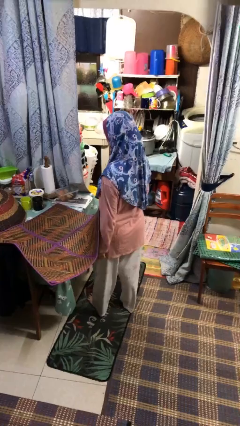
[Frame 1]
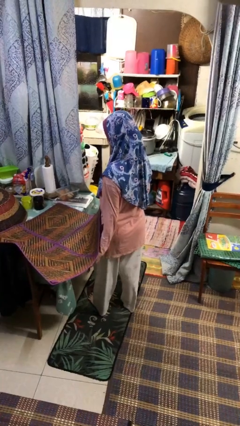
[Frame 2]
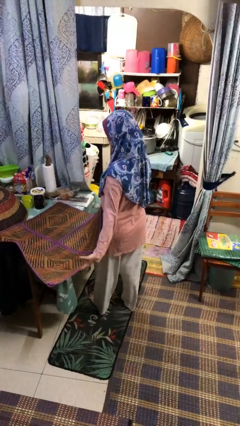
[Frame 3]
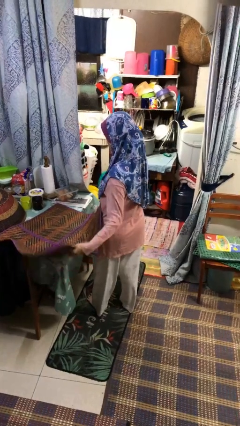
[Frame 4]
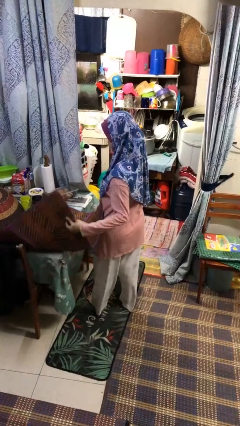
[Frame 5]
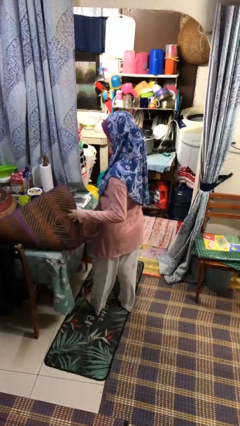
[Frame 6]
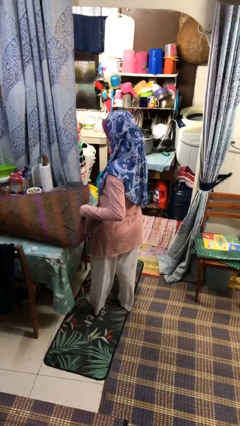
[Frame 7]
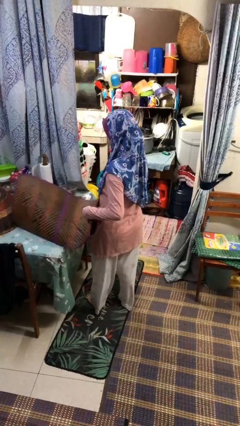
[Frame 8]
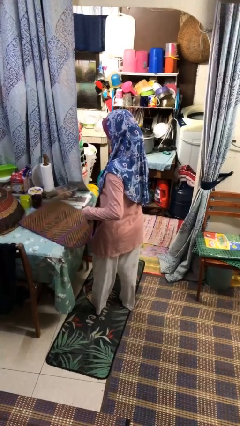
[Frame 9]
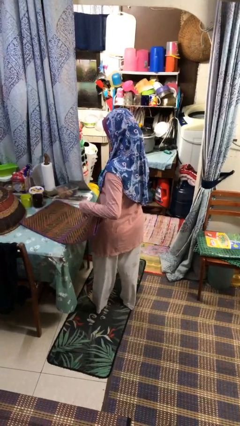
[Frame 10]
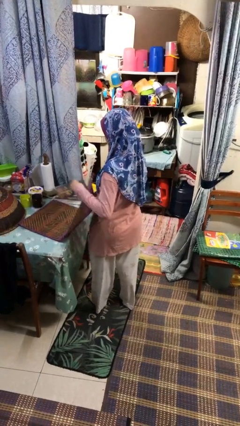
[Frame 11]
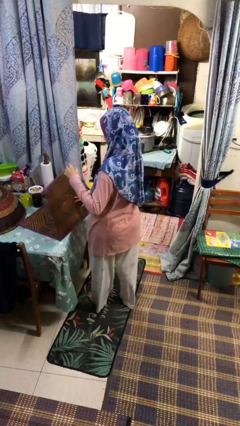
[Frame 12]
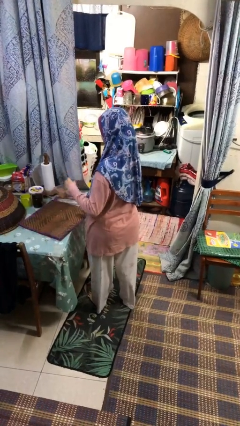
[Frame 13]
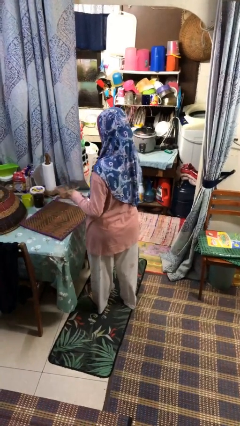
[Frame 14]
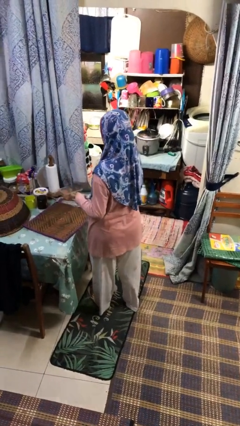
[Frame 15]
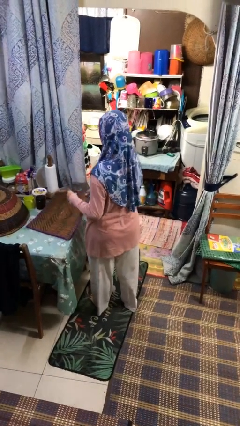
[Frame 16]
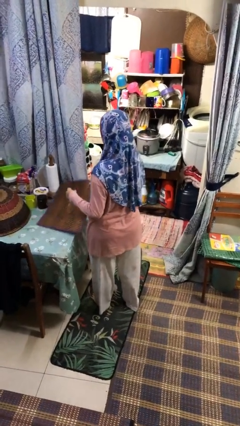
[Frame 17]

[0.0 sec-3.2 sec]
person folds tablecloth

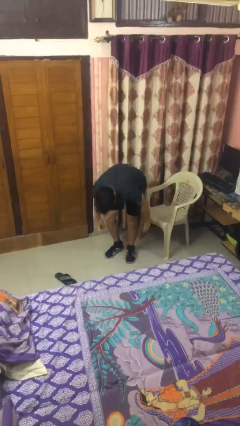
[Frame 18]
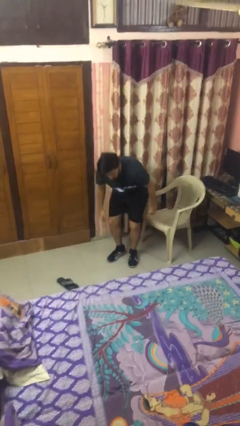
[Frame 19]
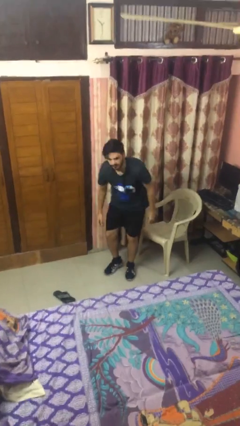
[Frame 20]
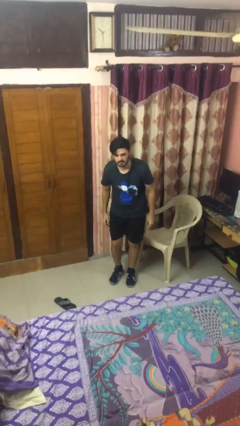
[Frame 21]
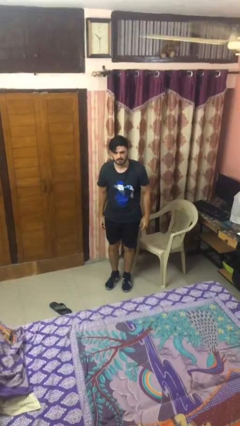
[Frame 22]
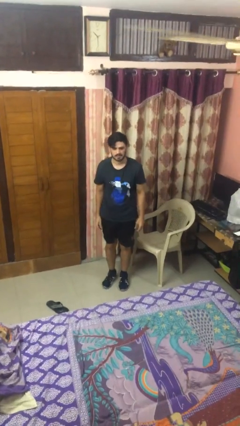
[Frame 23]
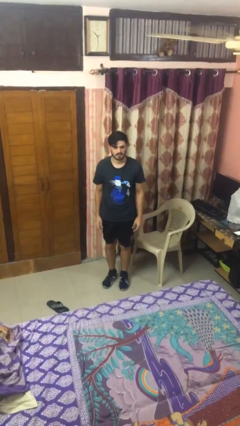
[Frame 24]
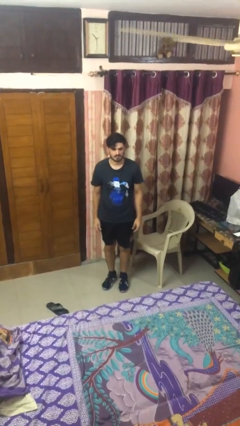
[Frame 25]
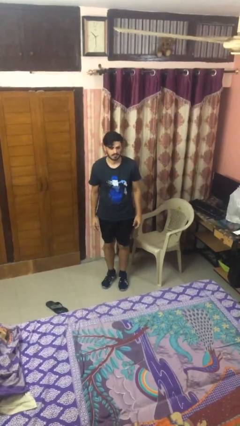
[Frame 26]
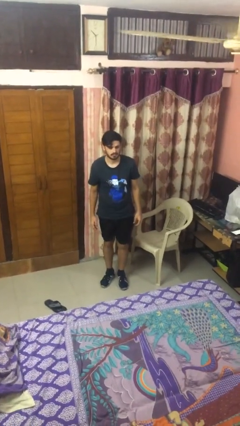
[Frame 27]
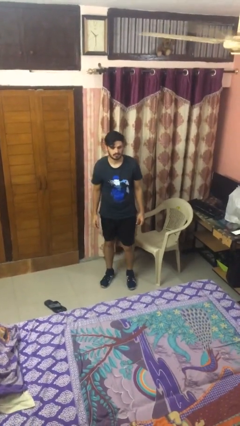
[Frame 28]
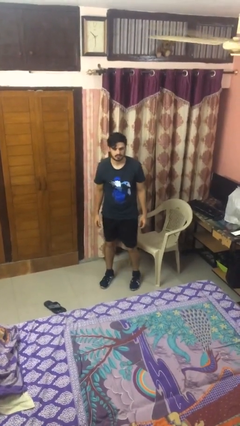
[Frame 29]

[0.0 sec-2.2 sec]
person stands up from floor

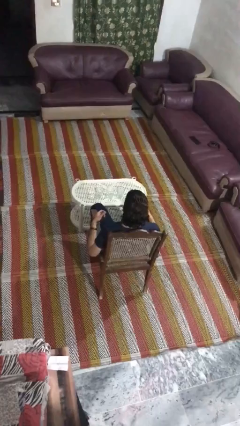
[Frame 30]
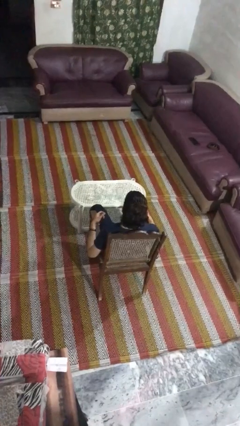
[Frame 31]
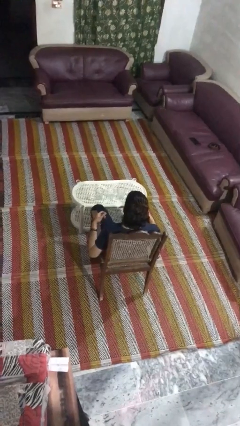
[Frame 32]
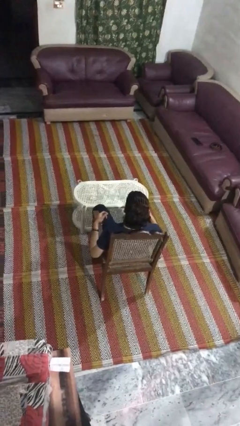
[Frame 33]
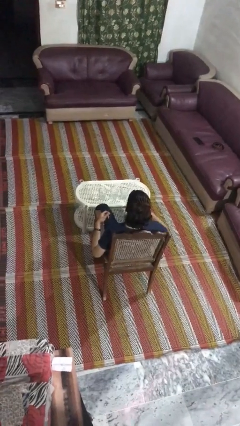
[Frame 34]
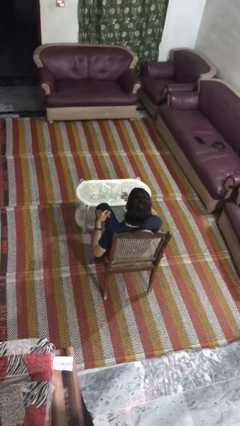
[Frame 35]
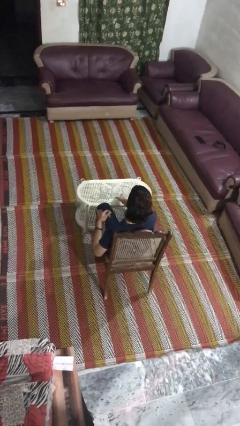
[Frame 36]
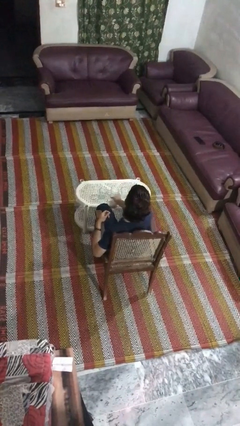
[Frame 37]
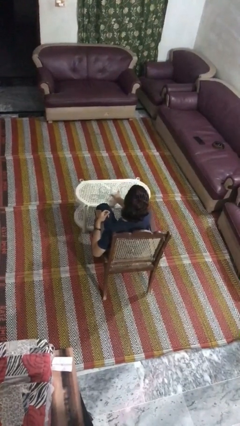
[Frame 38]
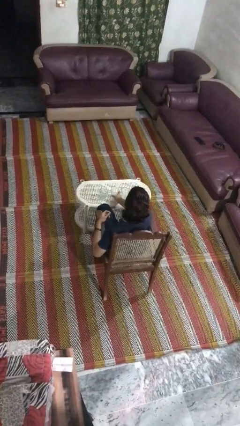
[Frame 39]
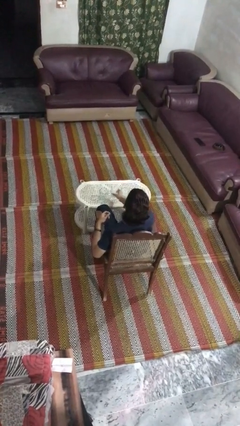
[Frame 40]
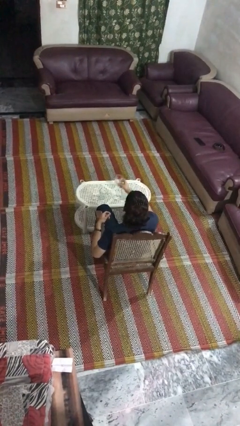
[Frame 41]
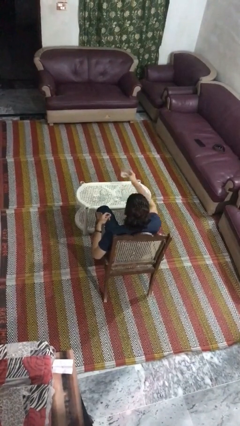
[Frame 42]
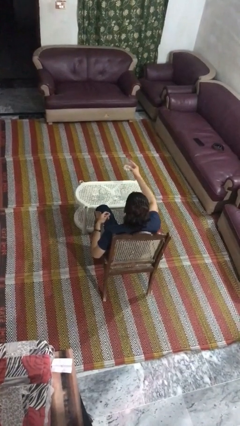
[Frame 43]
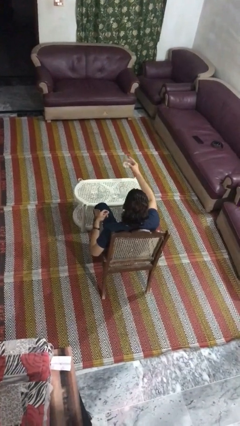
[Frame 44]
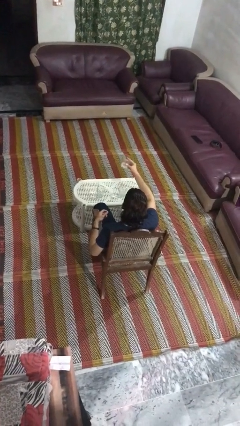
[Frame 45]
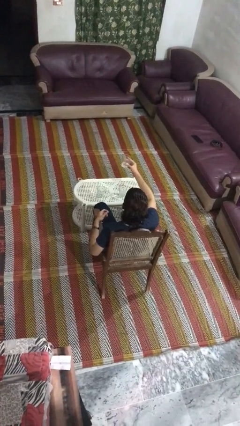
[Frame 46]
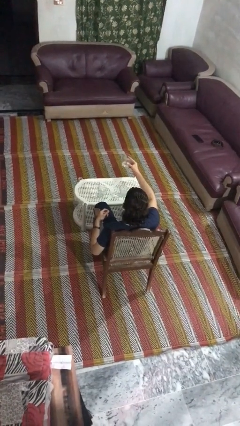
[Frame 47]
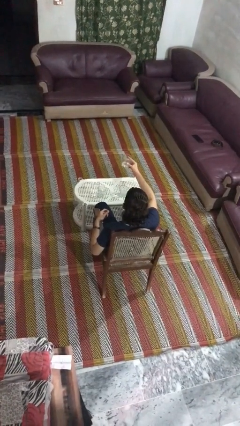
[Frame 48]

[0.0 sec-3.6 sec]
person picks up object from table

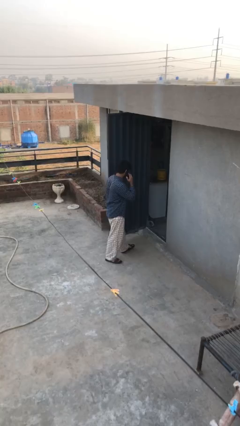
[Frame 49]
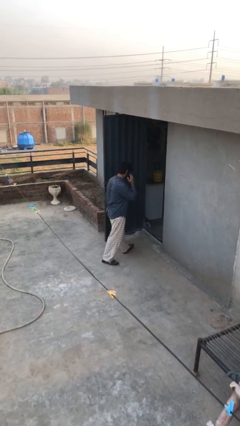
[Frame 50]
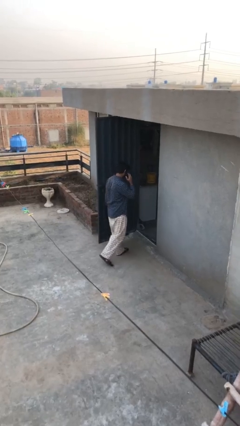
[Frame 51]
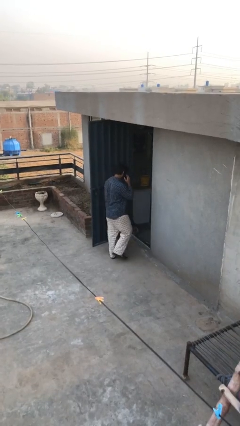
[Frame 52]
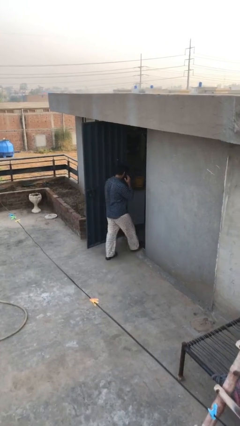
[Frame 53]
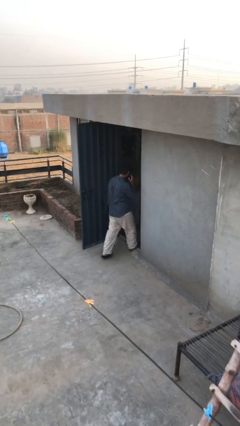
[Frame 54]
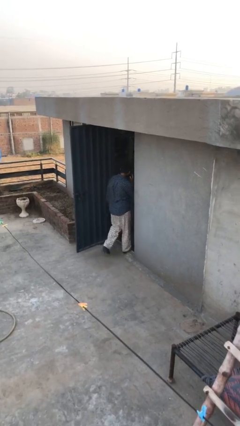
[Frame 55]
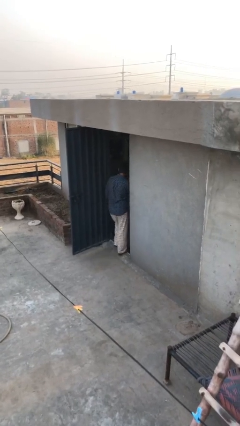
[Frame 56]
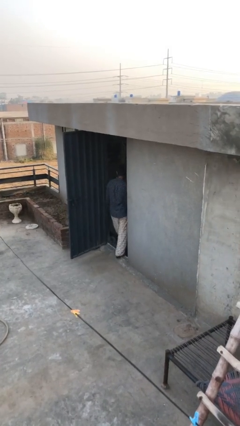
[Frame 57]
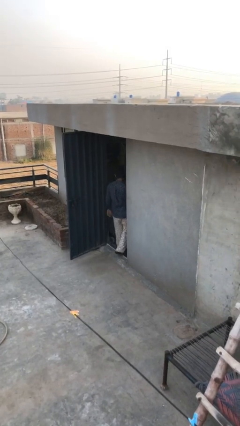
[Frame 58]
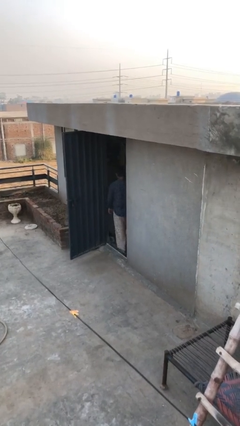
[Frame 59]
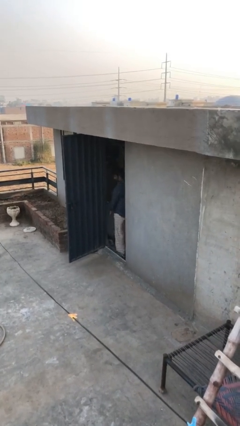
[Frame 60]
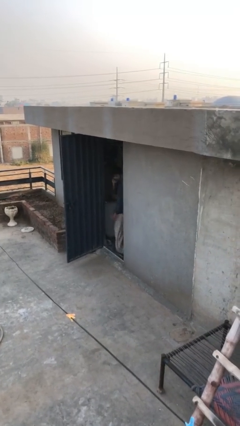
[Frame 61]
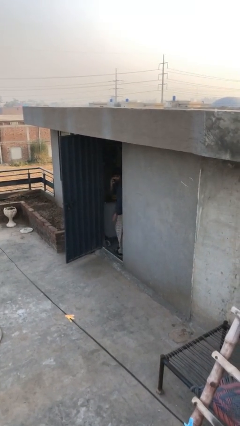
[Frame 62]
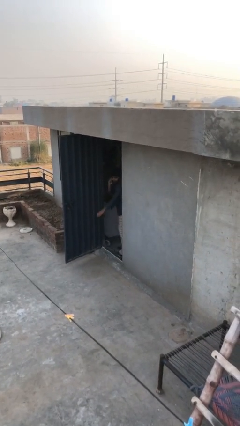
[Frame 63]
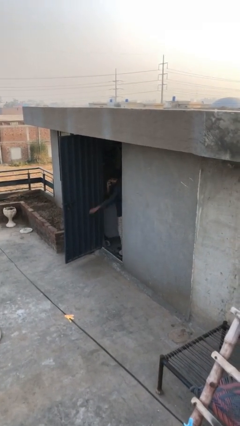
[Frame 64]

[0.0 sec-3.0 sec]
person exits scene through structure

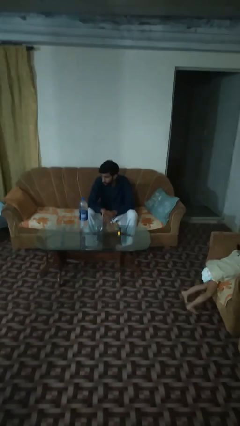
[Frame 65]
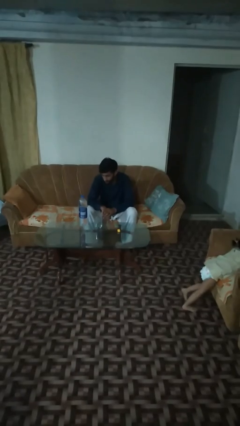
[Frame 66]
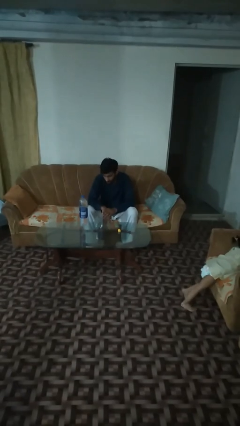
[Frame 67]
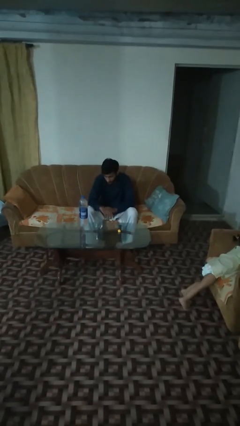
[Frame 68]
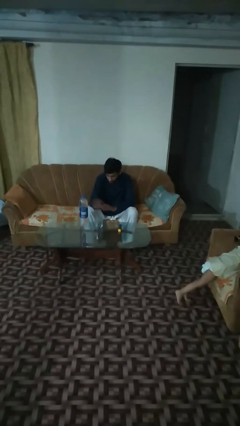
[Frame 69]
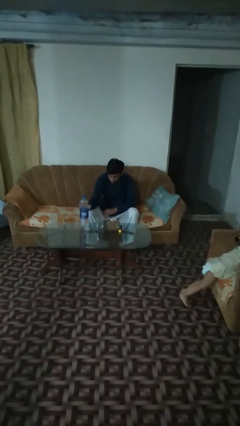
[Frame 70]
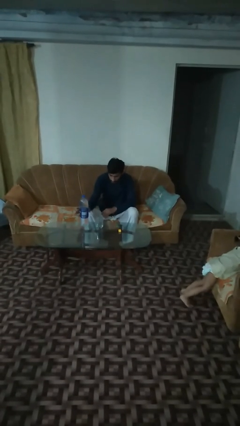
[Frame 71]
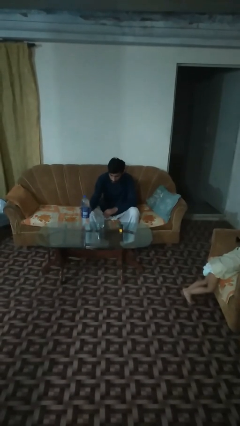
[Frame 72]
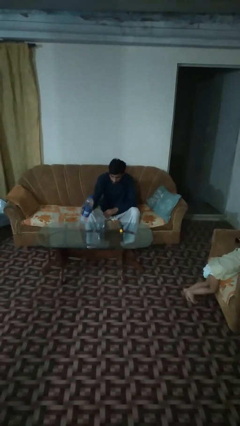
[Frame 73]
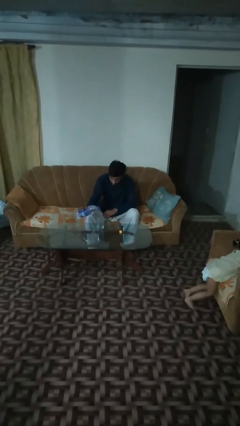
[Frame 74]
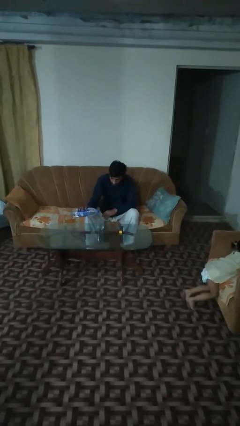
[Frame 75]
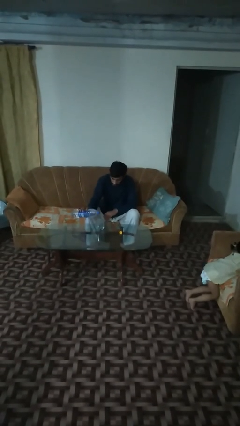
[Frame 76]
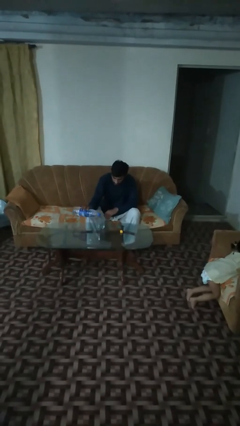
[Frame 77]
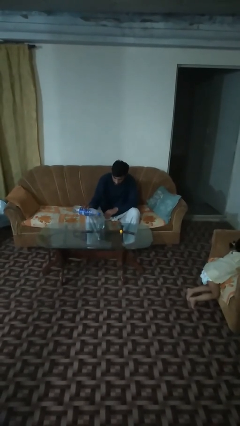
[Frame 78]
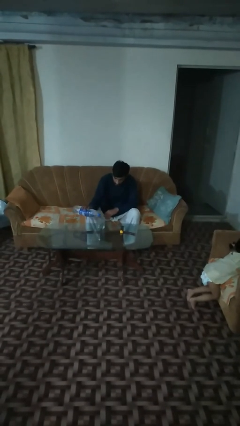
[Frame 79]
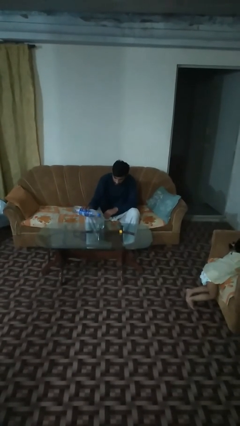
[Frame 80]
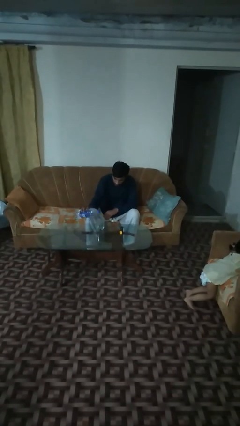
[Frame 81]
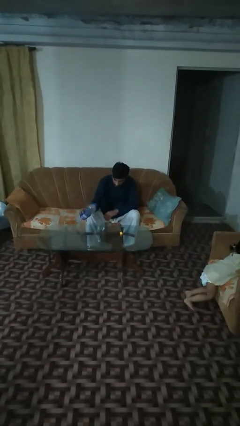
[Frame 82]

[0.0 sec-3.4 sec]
person pours liquid into cup

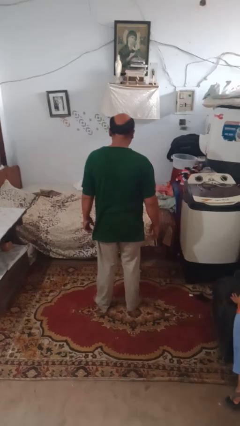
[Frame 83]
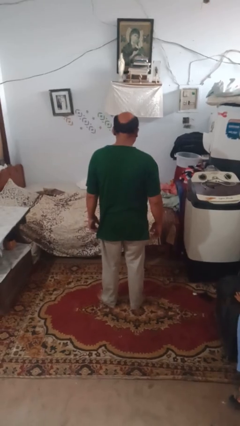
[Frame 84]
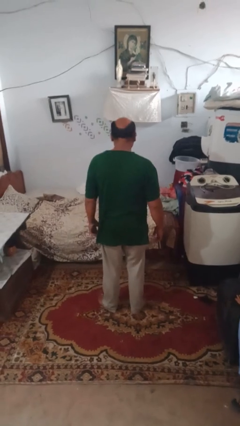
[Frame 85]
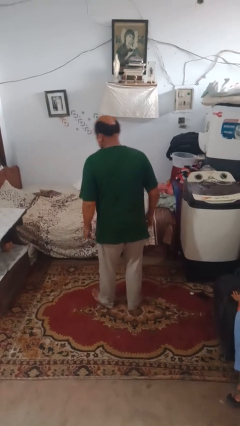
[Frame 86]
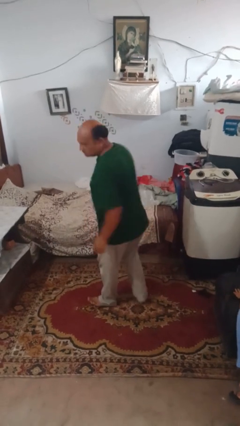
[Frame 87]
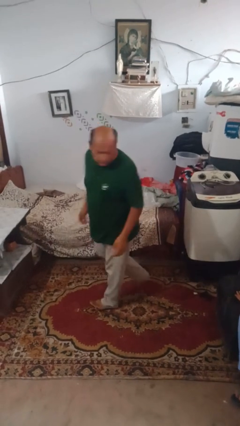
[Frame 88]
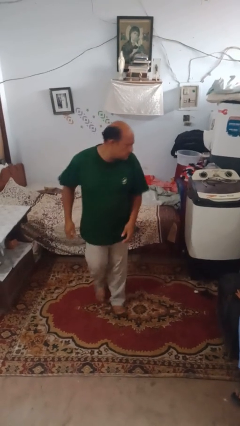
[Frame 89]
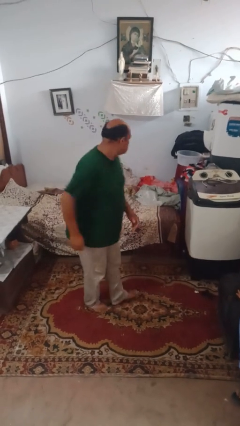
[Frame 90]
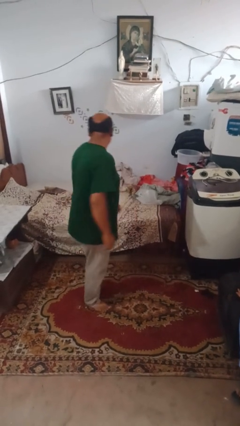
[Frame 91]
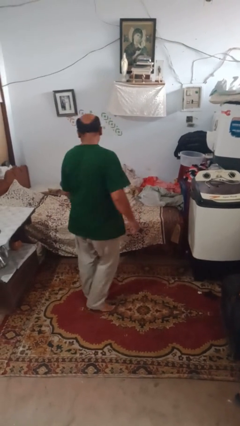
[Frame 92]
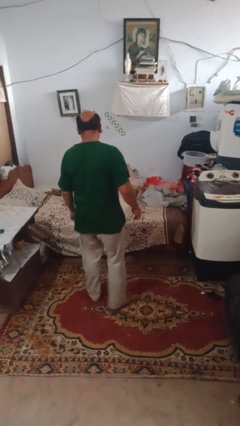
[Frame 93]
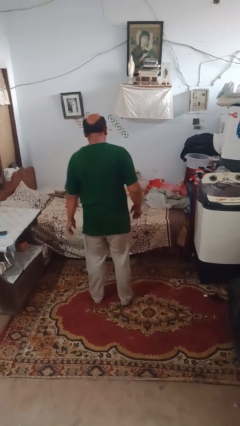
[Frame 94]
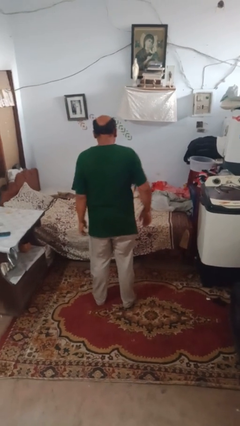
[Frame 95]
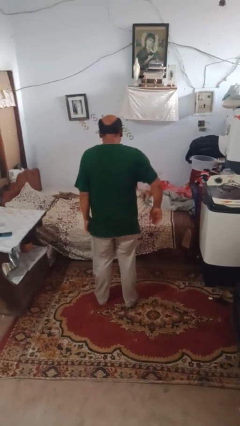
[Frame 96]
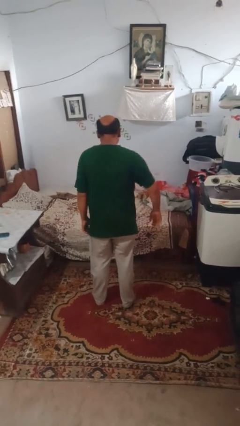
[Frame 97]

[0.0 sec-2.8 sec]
person twirls
